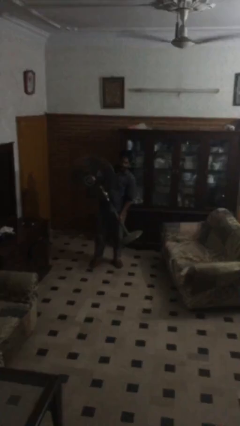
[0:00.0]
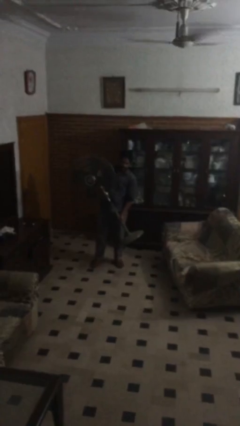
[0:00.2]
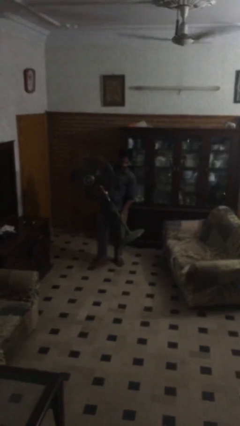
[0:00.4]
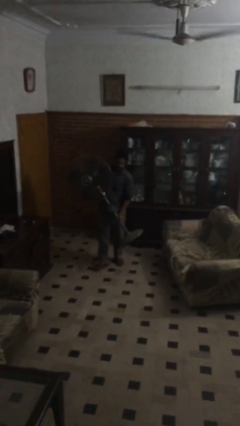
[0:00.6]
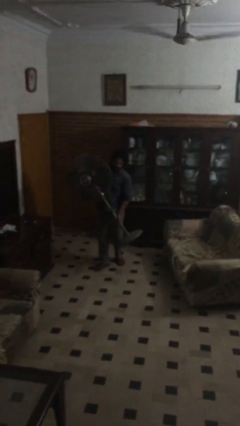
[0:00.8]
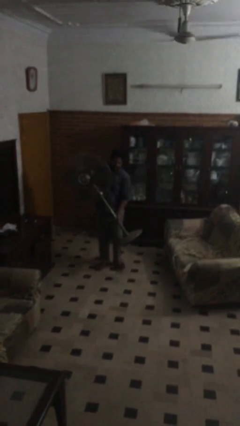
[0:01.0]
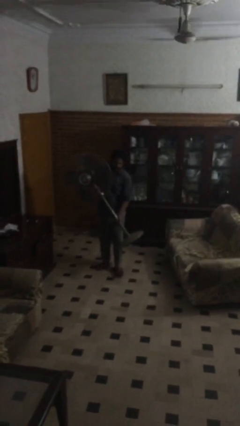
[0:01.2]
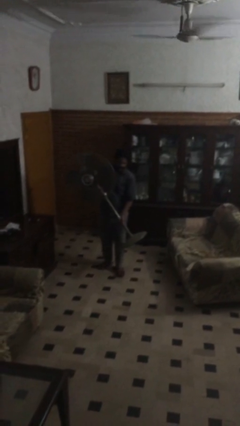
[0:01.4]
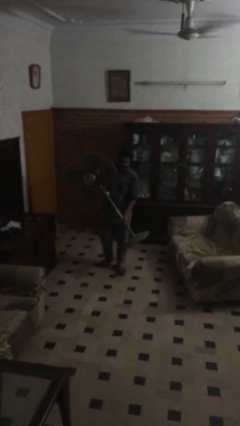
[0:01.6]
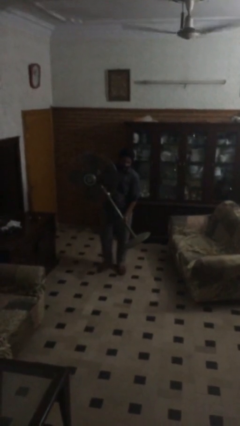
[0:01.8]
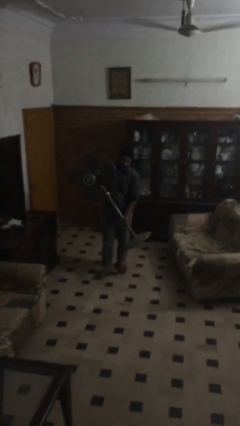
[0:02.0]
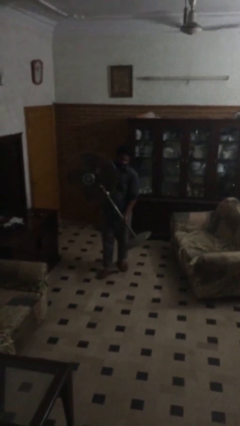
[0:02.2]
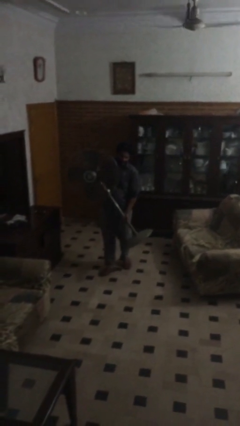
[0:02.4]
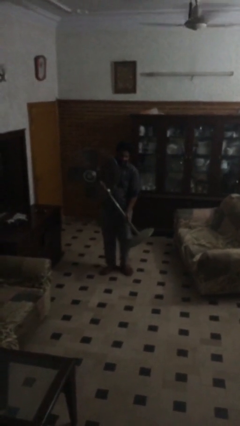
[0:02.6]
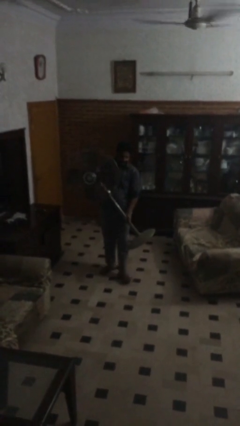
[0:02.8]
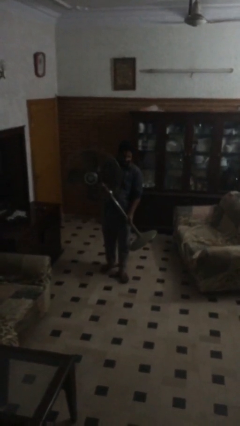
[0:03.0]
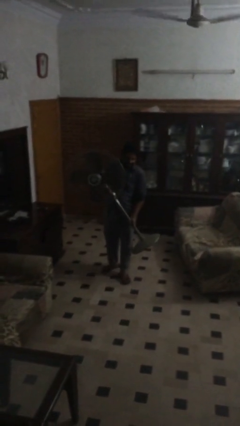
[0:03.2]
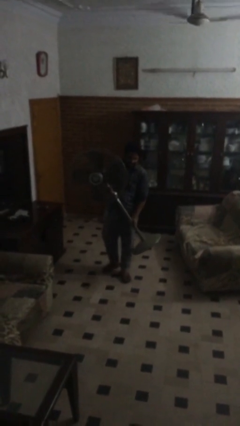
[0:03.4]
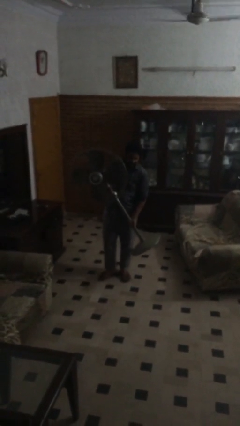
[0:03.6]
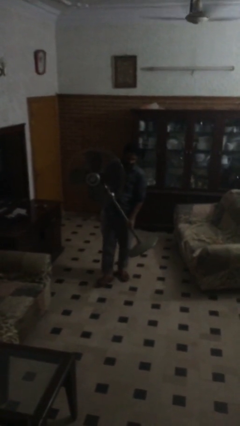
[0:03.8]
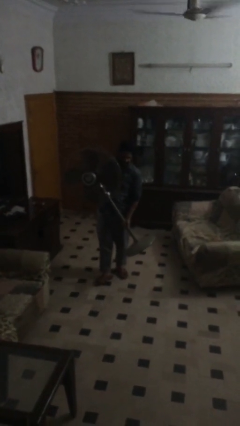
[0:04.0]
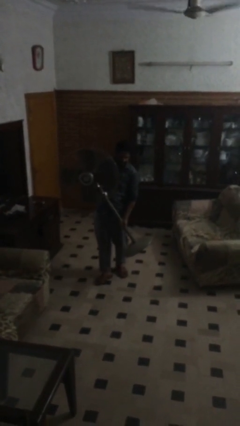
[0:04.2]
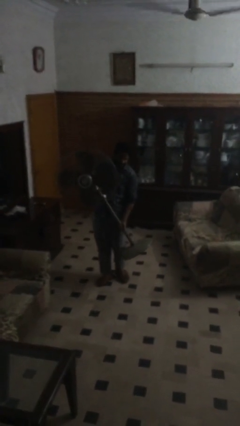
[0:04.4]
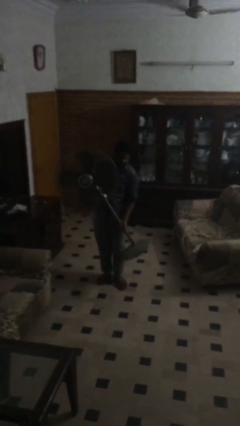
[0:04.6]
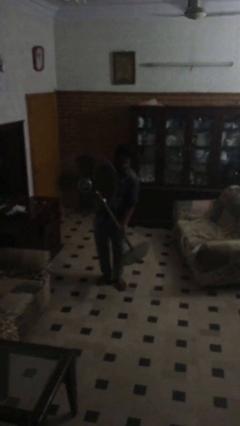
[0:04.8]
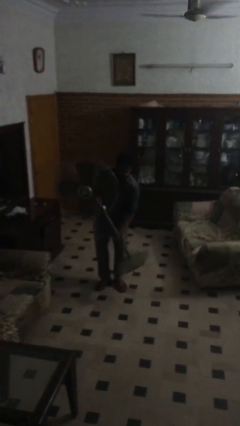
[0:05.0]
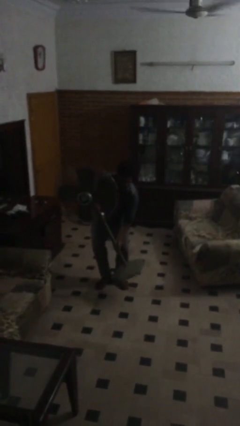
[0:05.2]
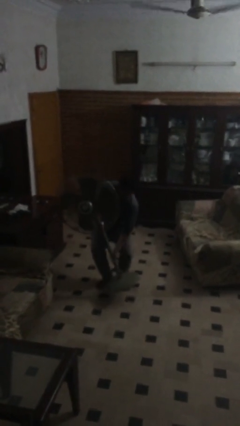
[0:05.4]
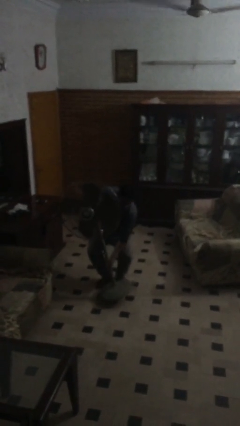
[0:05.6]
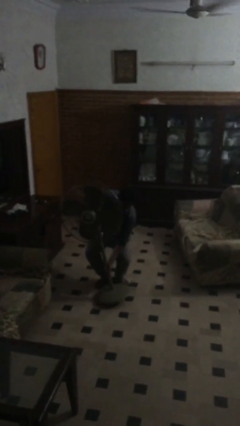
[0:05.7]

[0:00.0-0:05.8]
person carries heavy object

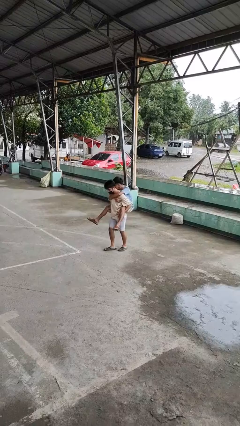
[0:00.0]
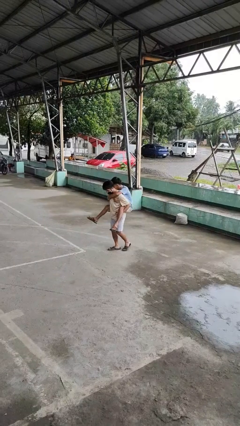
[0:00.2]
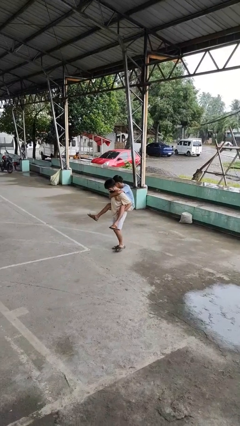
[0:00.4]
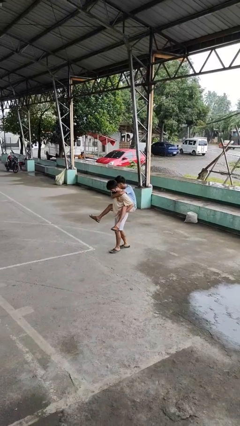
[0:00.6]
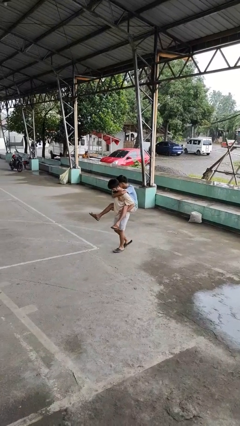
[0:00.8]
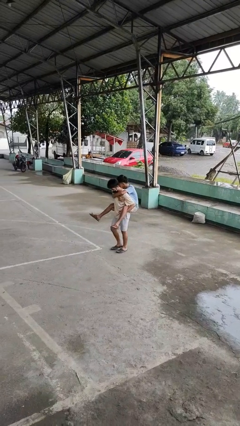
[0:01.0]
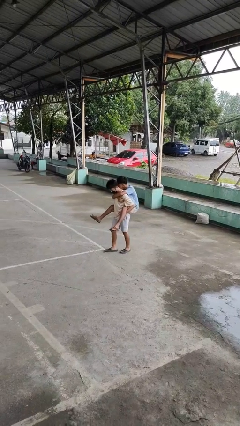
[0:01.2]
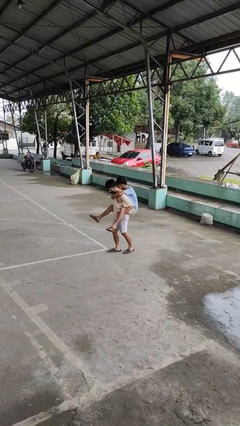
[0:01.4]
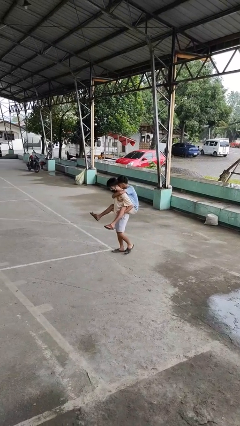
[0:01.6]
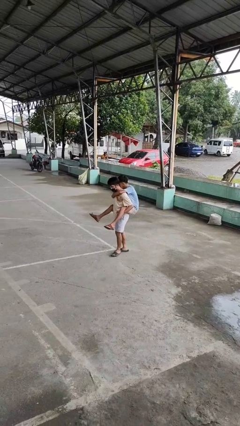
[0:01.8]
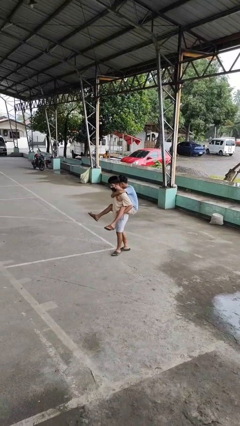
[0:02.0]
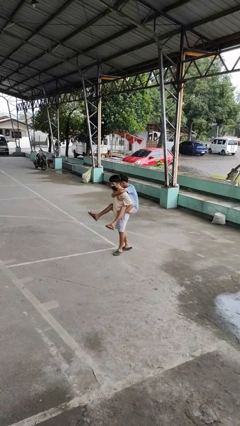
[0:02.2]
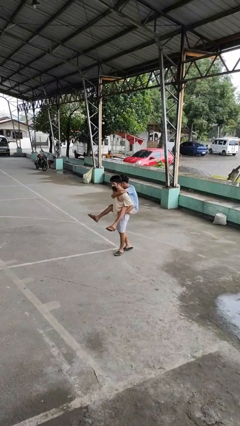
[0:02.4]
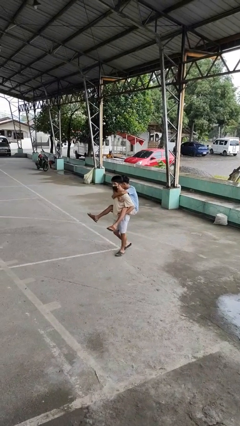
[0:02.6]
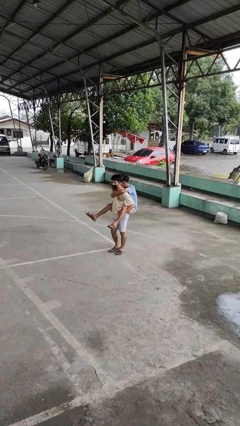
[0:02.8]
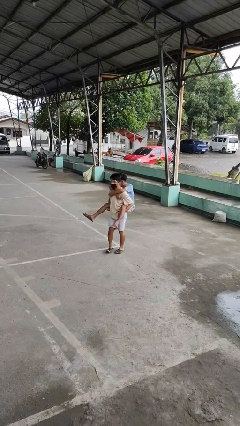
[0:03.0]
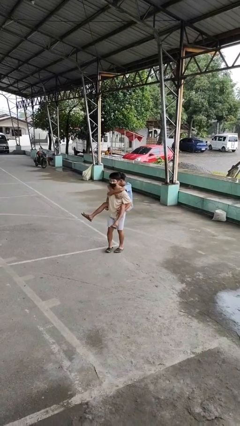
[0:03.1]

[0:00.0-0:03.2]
person carries person on back

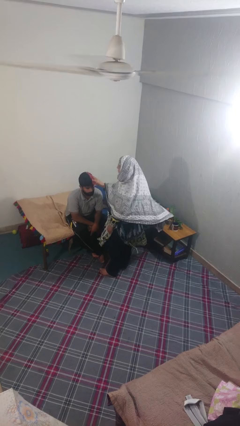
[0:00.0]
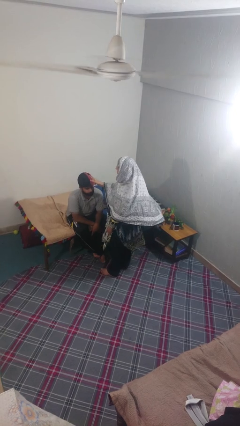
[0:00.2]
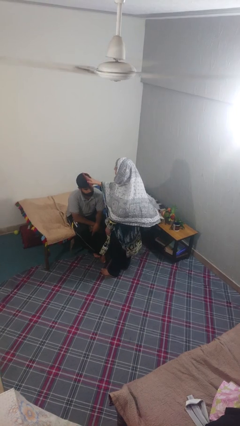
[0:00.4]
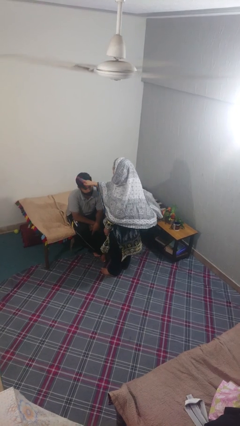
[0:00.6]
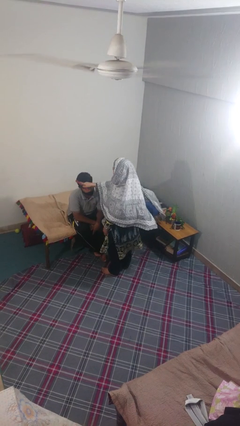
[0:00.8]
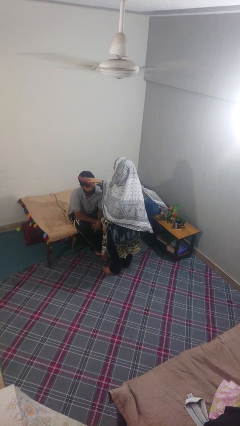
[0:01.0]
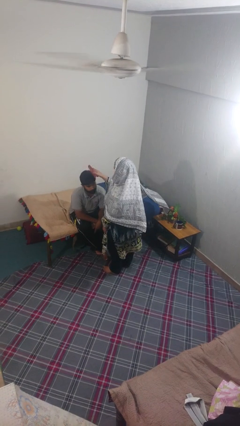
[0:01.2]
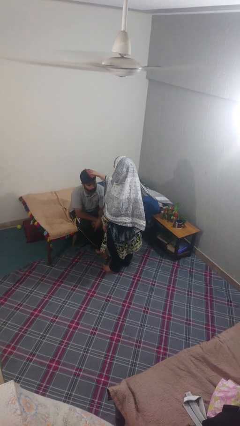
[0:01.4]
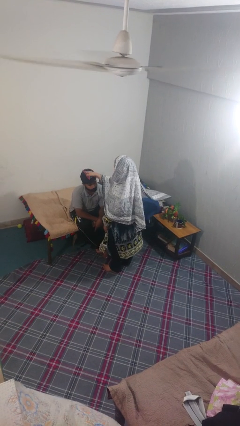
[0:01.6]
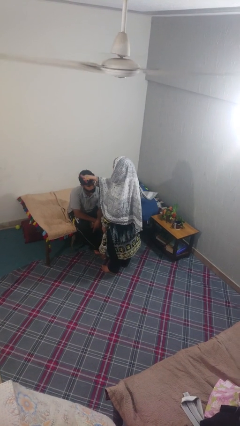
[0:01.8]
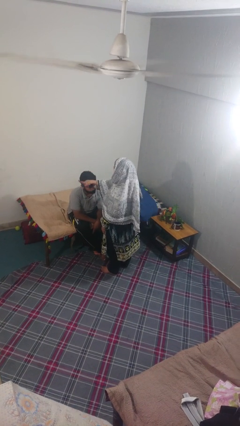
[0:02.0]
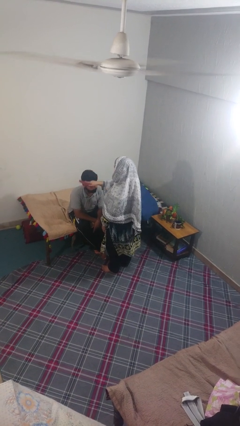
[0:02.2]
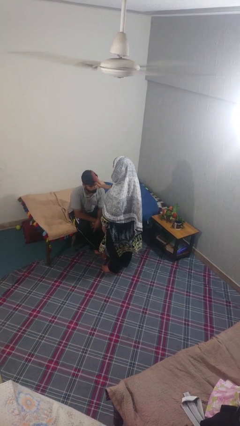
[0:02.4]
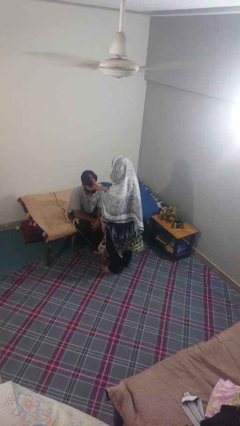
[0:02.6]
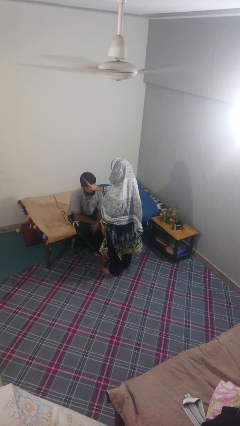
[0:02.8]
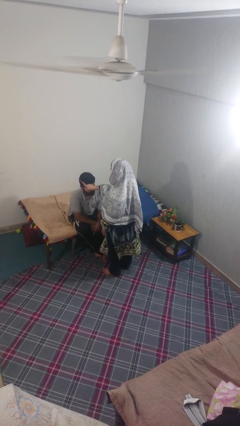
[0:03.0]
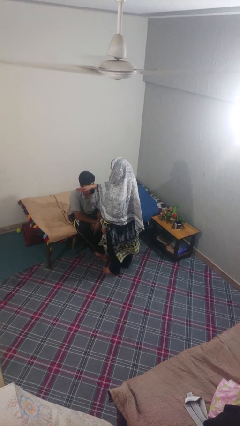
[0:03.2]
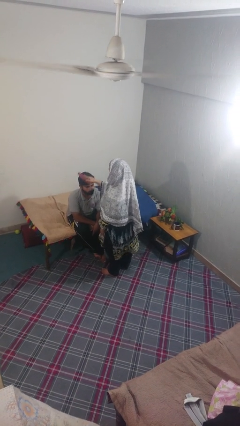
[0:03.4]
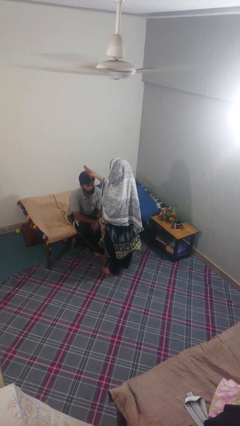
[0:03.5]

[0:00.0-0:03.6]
person brushes hair of person

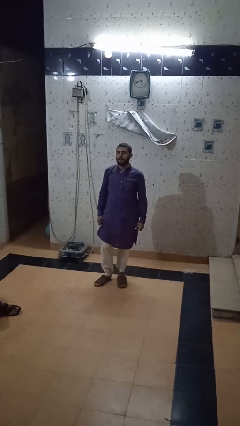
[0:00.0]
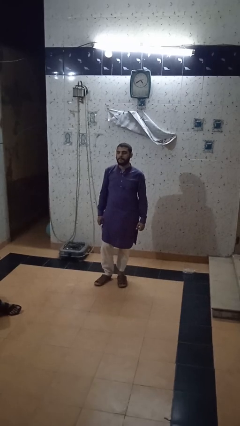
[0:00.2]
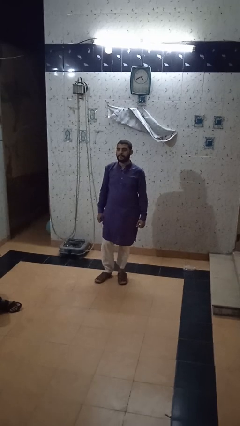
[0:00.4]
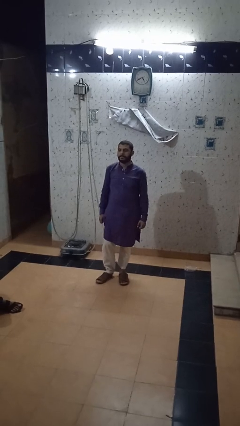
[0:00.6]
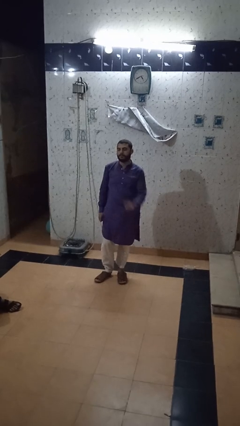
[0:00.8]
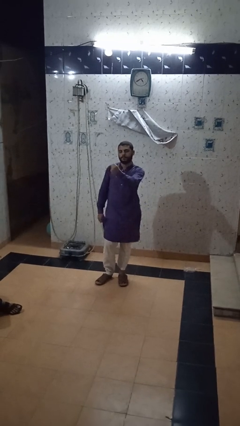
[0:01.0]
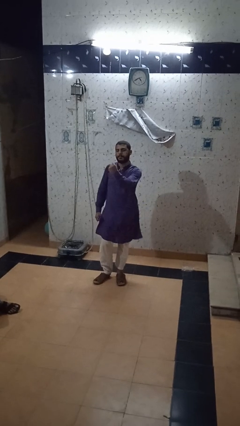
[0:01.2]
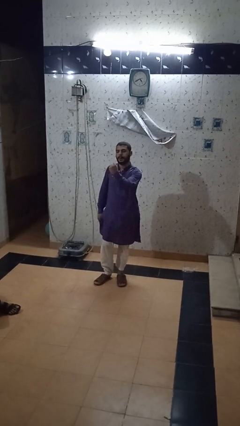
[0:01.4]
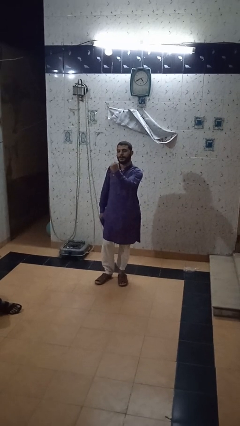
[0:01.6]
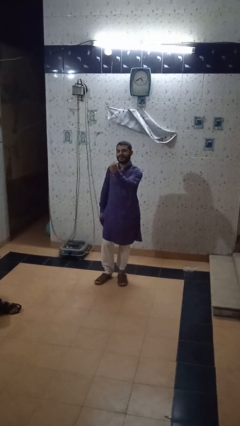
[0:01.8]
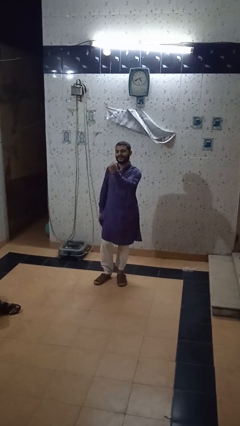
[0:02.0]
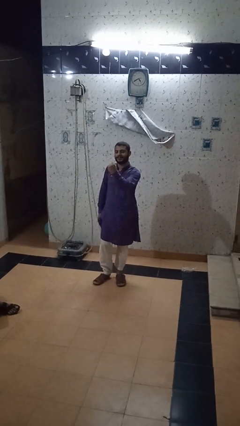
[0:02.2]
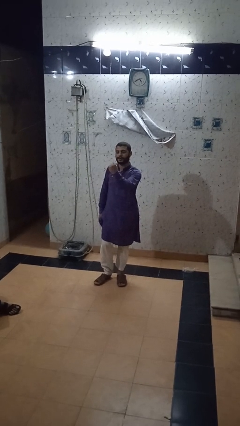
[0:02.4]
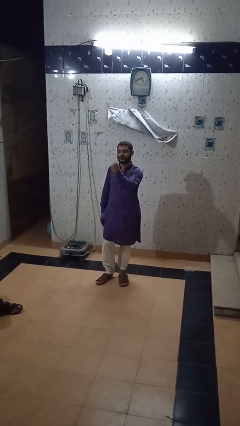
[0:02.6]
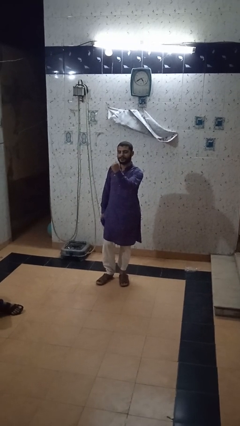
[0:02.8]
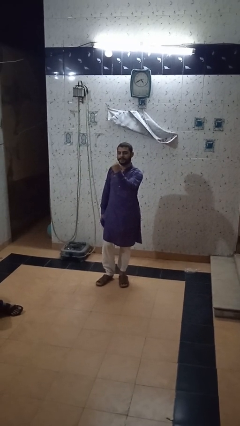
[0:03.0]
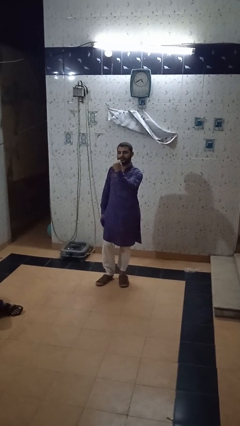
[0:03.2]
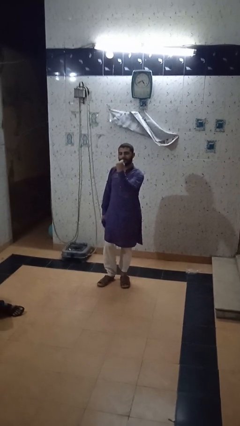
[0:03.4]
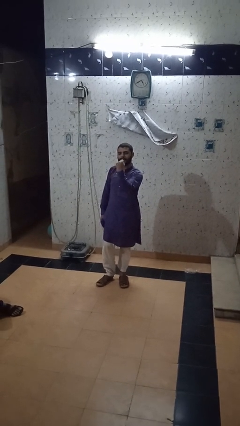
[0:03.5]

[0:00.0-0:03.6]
person punches

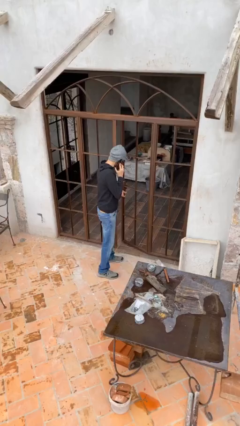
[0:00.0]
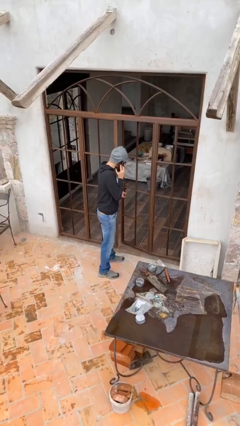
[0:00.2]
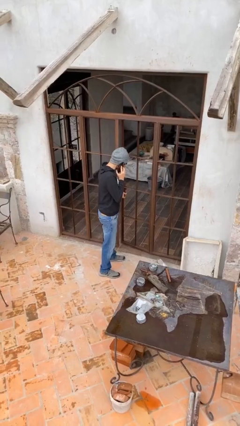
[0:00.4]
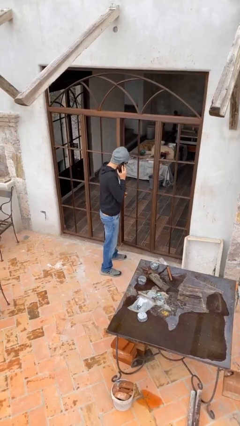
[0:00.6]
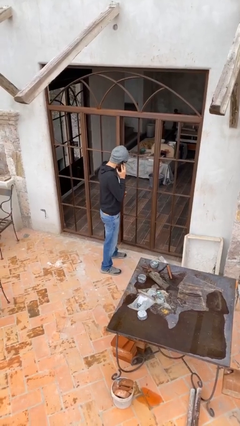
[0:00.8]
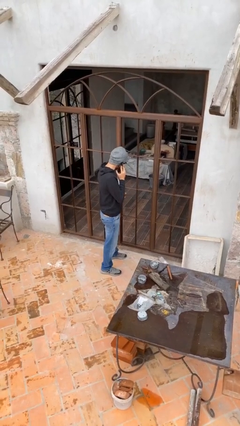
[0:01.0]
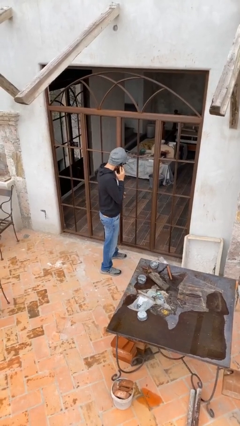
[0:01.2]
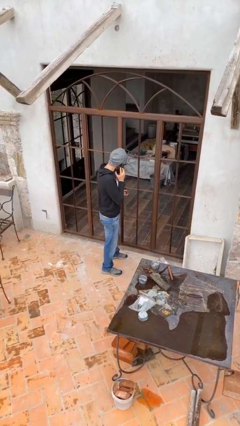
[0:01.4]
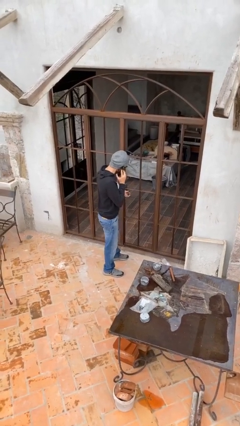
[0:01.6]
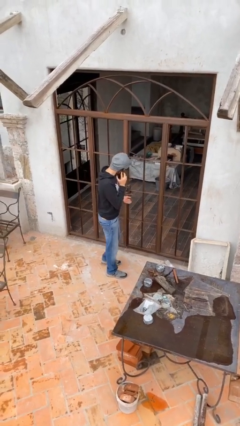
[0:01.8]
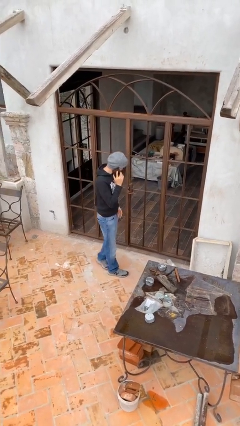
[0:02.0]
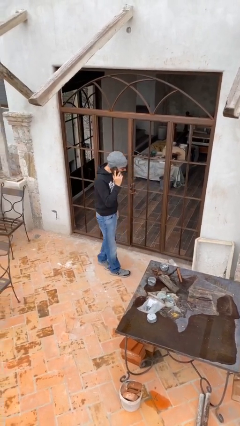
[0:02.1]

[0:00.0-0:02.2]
person closes facility door
